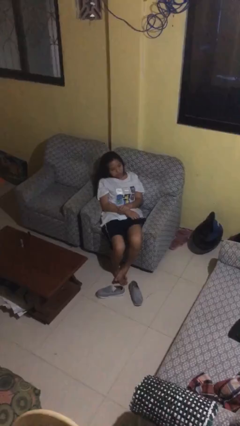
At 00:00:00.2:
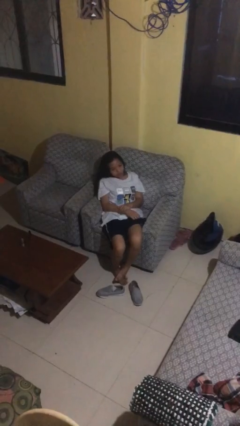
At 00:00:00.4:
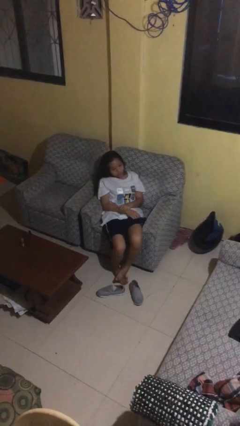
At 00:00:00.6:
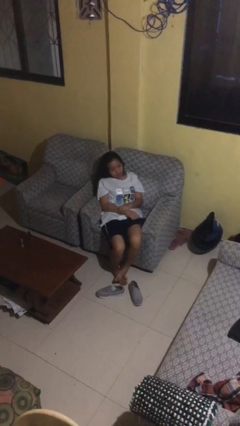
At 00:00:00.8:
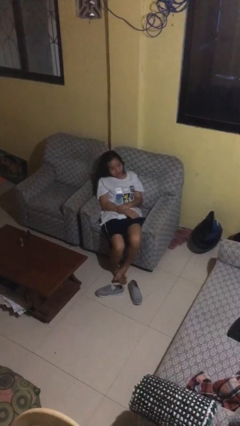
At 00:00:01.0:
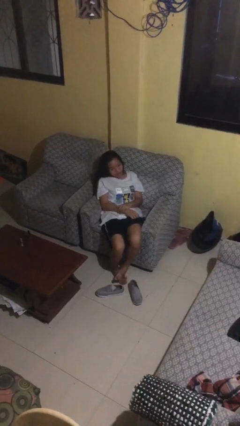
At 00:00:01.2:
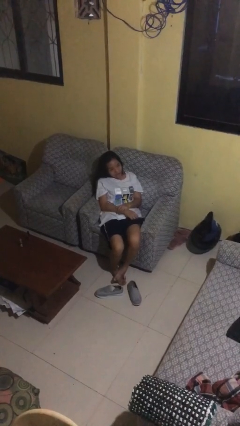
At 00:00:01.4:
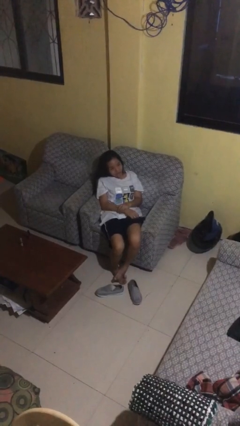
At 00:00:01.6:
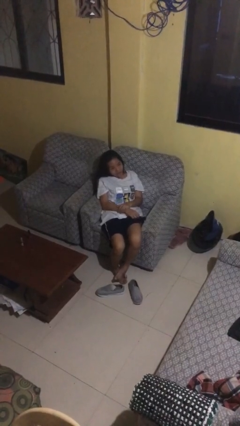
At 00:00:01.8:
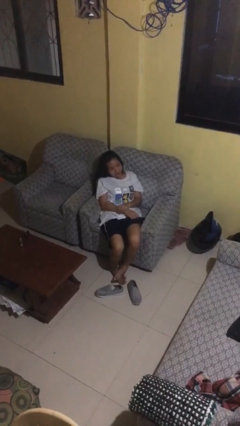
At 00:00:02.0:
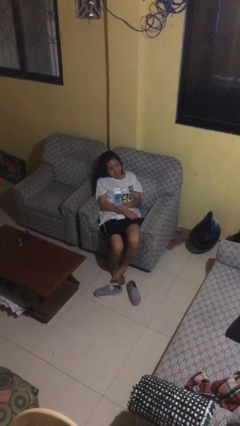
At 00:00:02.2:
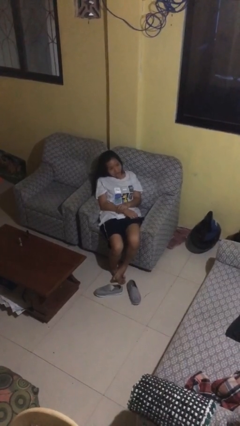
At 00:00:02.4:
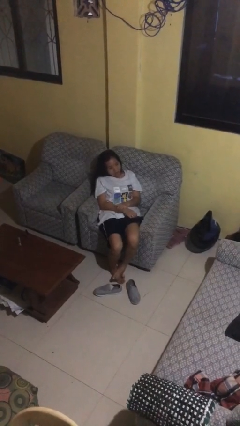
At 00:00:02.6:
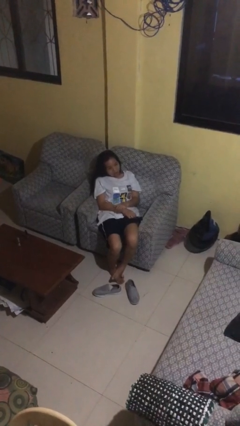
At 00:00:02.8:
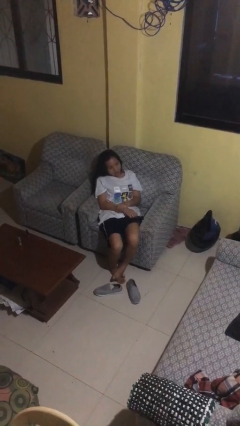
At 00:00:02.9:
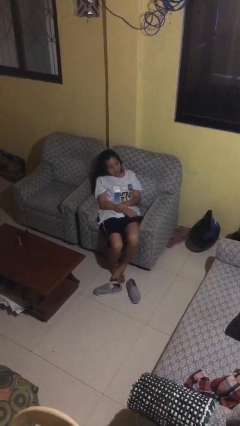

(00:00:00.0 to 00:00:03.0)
person sticks out tongue

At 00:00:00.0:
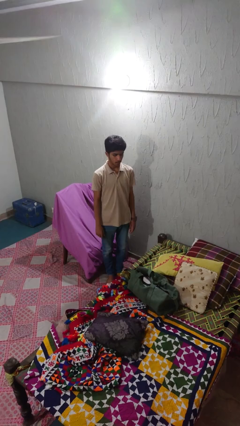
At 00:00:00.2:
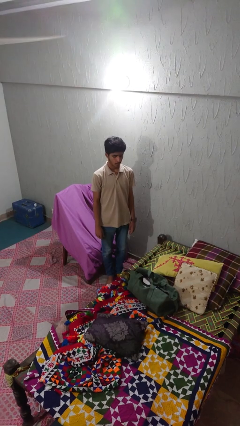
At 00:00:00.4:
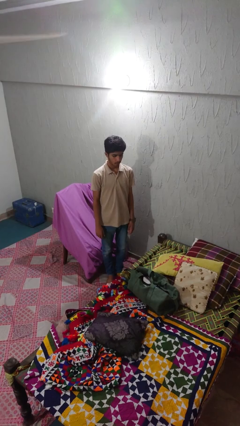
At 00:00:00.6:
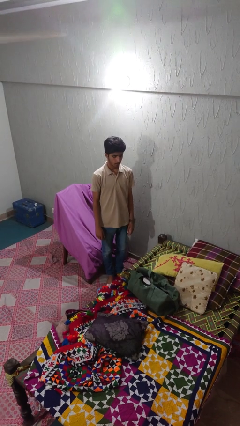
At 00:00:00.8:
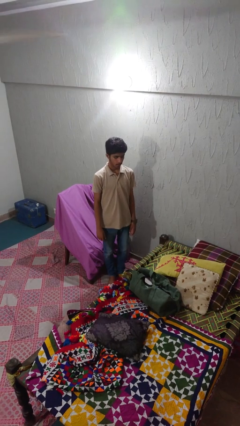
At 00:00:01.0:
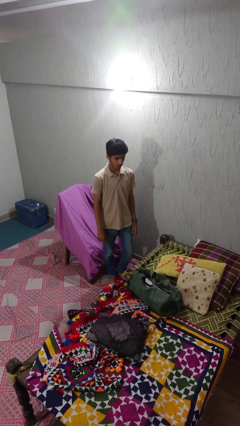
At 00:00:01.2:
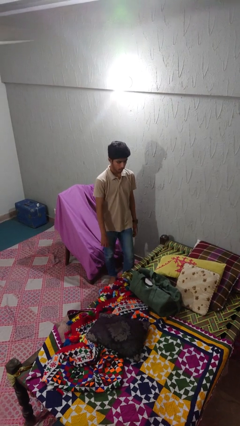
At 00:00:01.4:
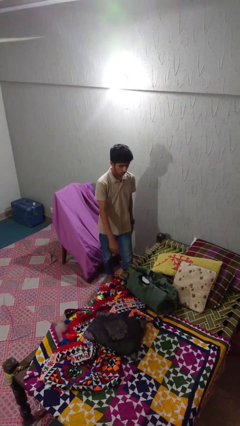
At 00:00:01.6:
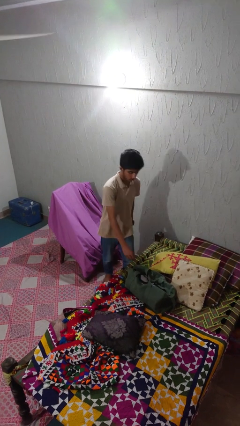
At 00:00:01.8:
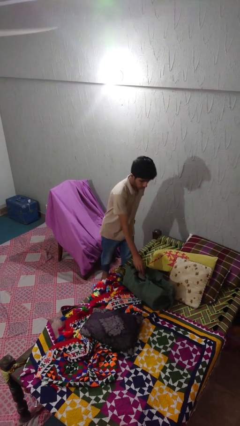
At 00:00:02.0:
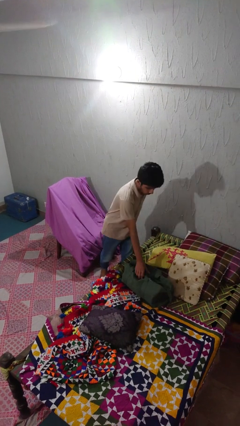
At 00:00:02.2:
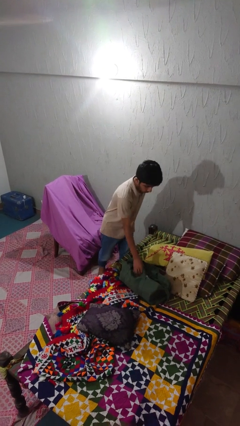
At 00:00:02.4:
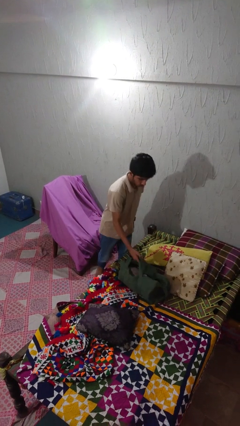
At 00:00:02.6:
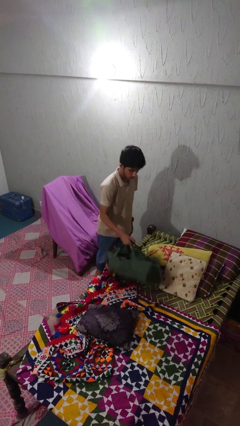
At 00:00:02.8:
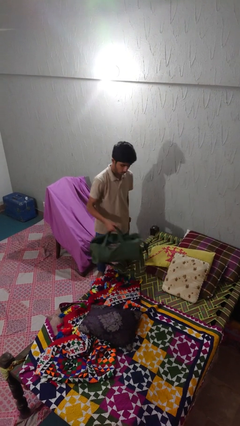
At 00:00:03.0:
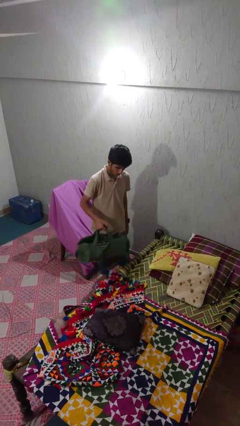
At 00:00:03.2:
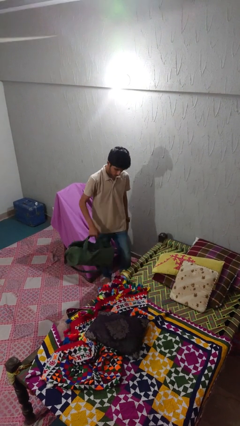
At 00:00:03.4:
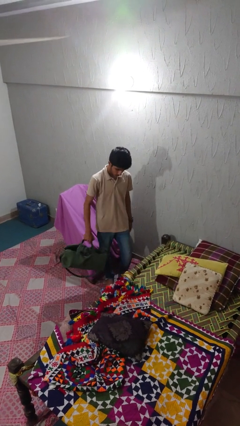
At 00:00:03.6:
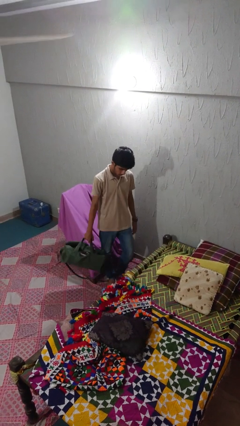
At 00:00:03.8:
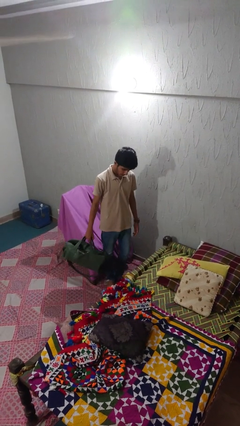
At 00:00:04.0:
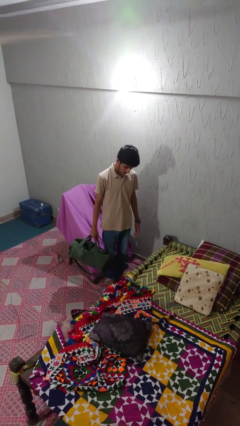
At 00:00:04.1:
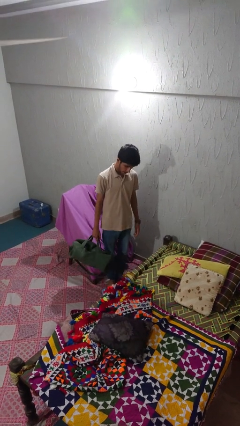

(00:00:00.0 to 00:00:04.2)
person picks up object from bed

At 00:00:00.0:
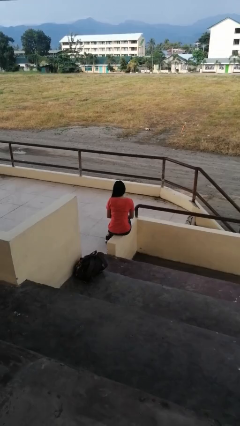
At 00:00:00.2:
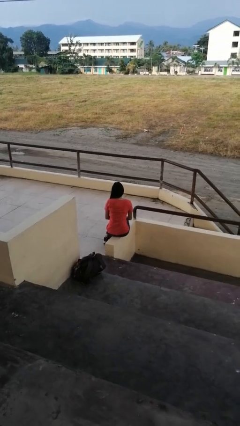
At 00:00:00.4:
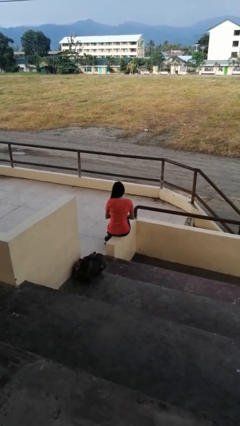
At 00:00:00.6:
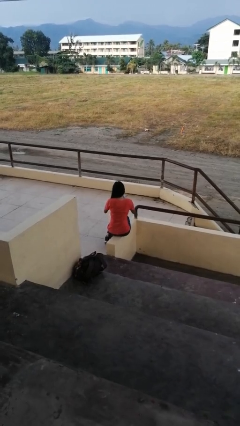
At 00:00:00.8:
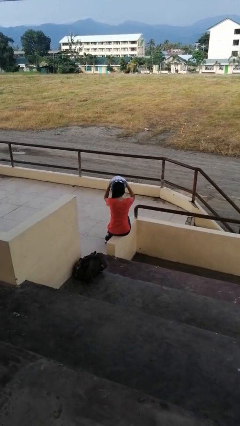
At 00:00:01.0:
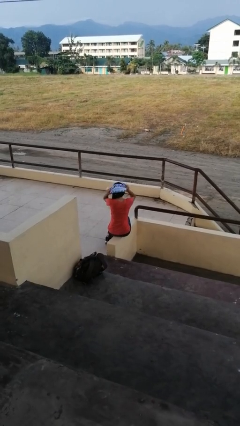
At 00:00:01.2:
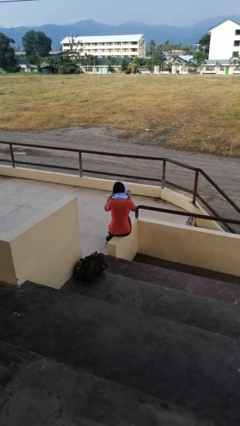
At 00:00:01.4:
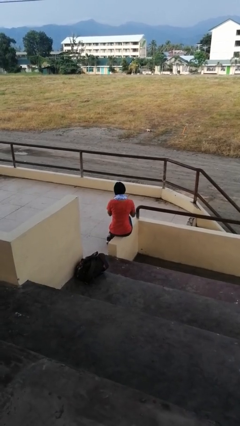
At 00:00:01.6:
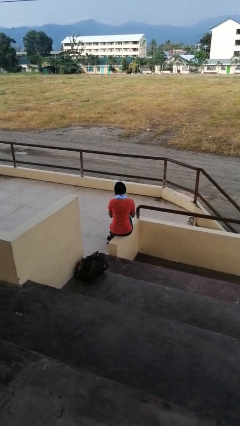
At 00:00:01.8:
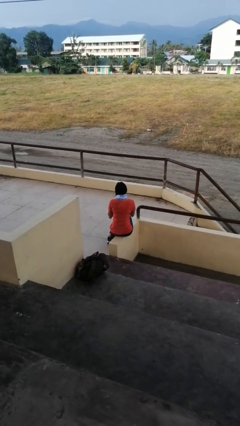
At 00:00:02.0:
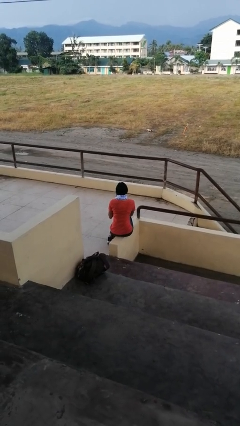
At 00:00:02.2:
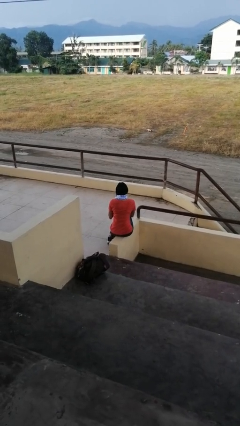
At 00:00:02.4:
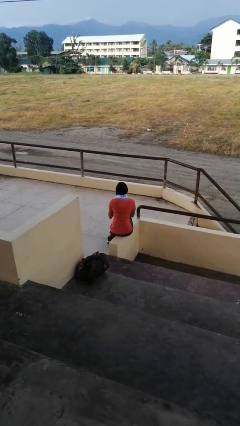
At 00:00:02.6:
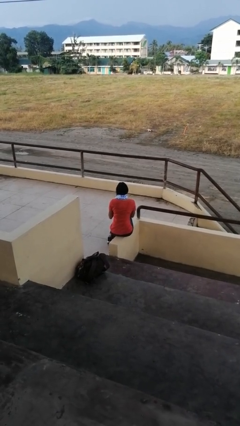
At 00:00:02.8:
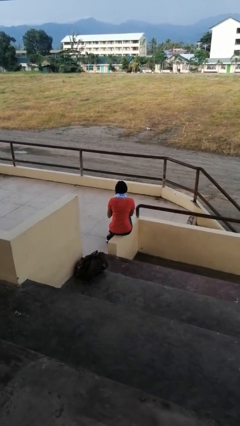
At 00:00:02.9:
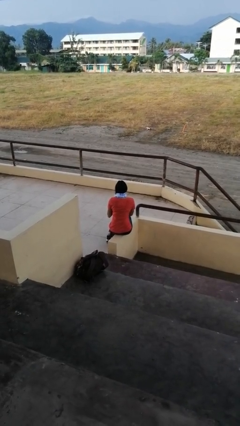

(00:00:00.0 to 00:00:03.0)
person puts on scarf

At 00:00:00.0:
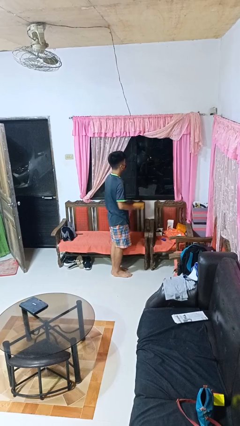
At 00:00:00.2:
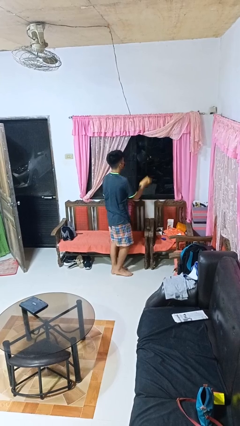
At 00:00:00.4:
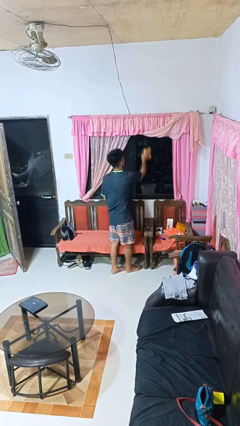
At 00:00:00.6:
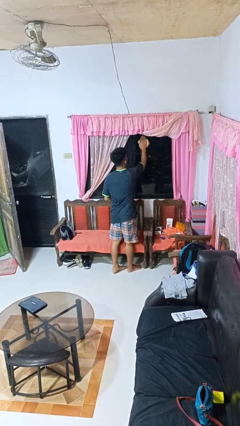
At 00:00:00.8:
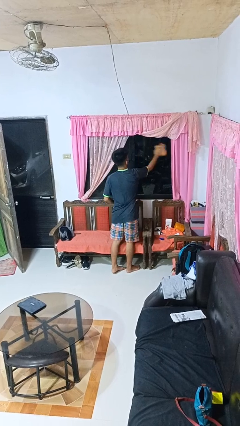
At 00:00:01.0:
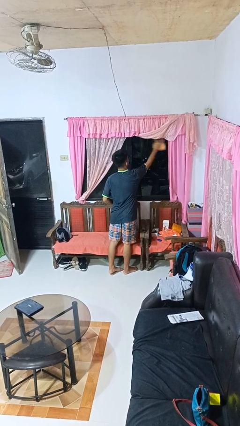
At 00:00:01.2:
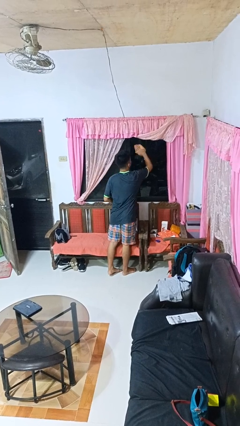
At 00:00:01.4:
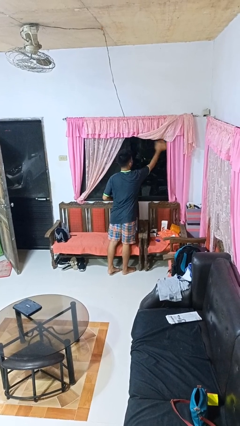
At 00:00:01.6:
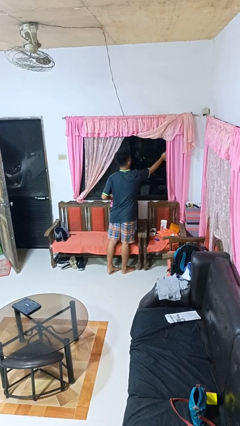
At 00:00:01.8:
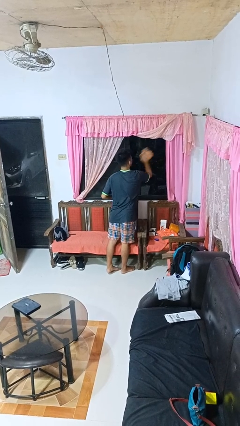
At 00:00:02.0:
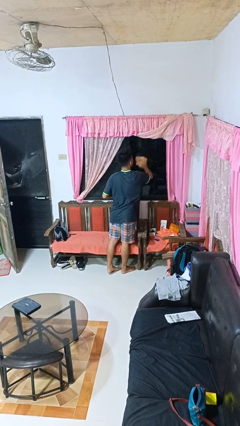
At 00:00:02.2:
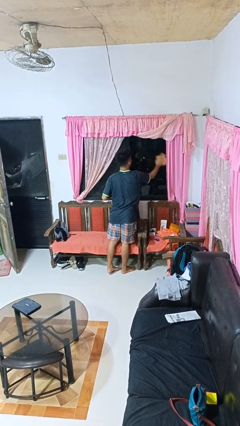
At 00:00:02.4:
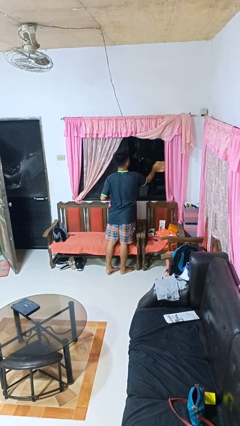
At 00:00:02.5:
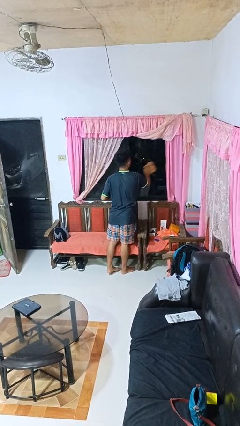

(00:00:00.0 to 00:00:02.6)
person washes window

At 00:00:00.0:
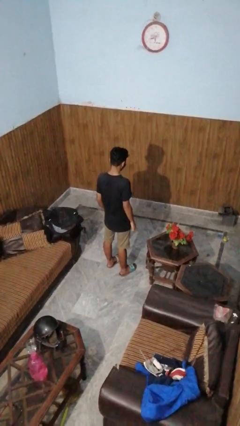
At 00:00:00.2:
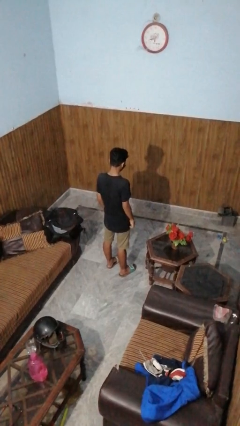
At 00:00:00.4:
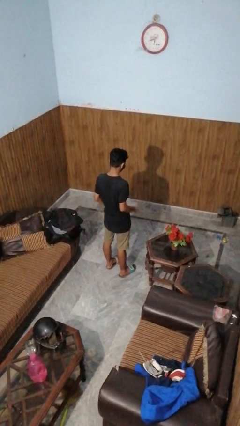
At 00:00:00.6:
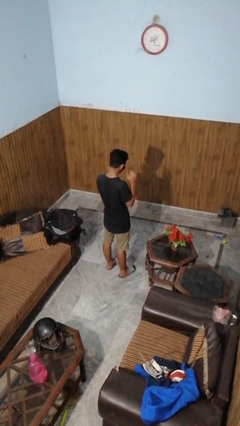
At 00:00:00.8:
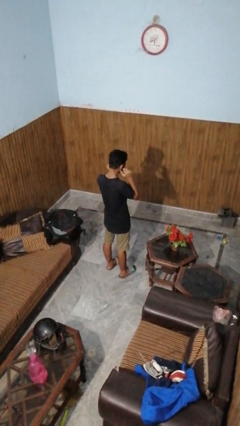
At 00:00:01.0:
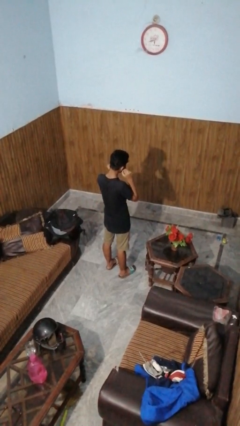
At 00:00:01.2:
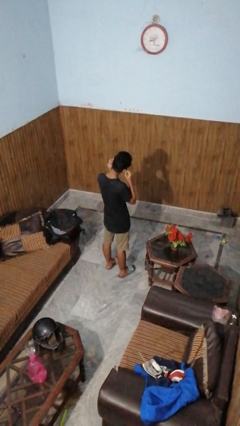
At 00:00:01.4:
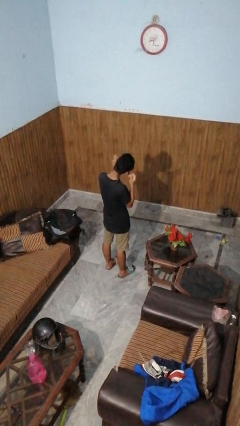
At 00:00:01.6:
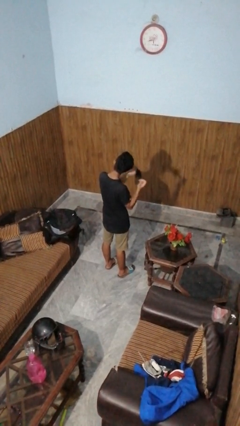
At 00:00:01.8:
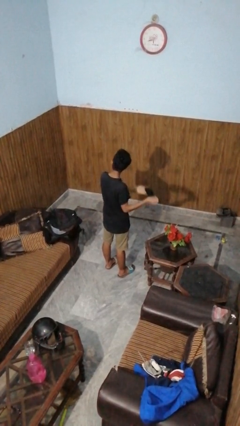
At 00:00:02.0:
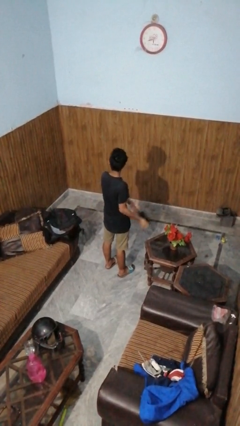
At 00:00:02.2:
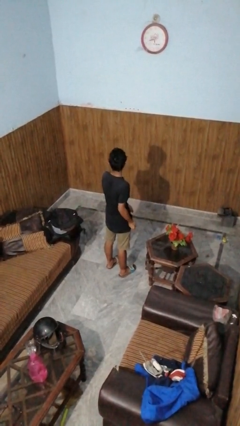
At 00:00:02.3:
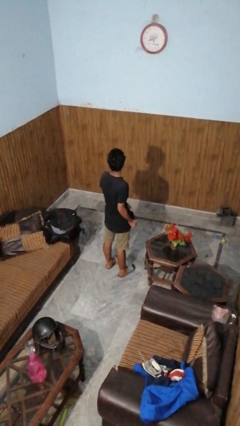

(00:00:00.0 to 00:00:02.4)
person takes off facemask

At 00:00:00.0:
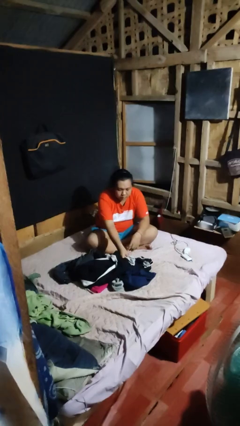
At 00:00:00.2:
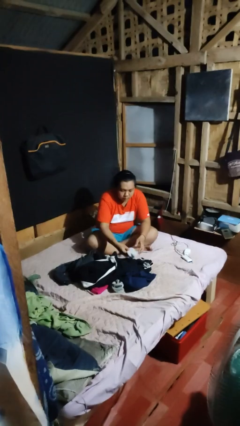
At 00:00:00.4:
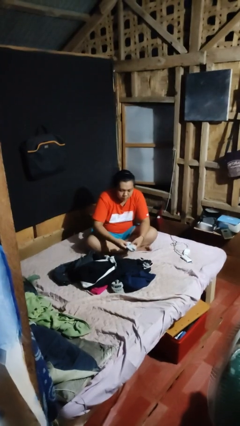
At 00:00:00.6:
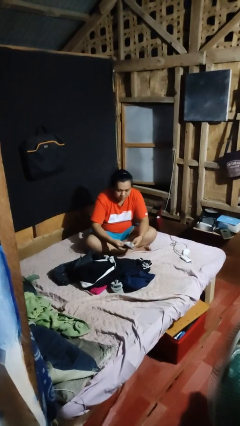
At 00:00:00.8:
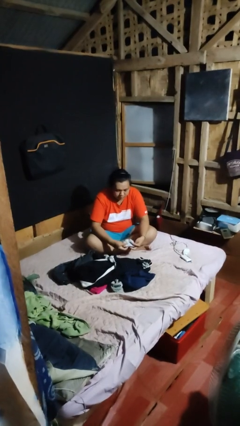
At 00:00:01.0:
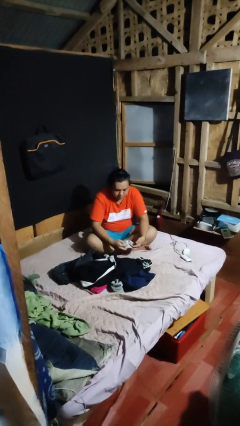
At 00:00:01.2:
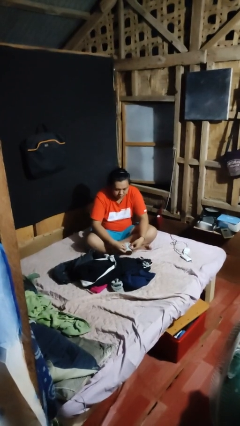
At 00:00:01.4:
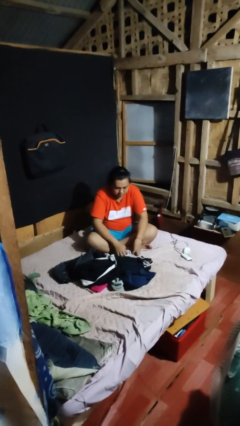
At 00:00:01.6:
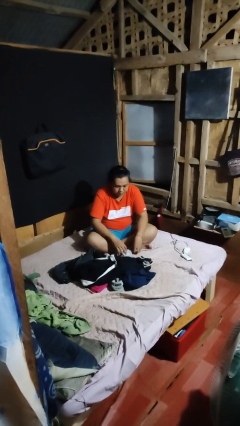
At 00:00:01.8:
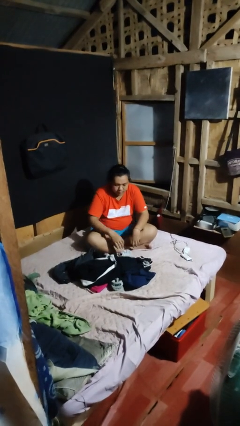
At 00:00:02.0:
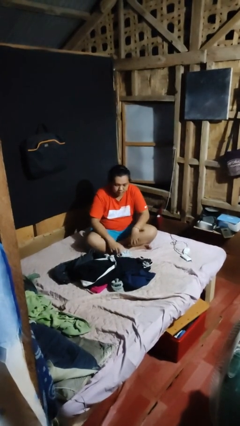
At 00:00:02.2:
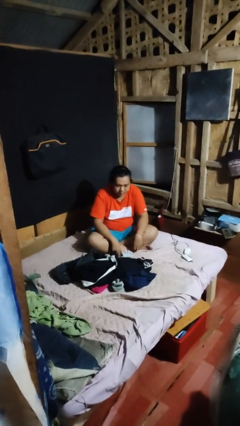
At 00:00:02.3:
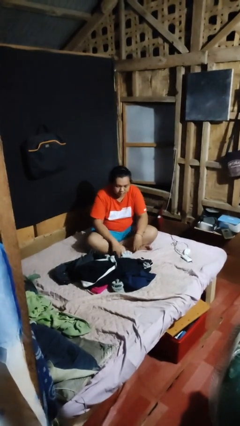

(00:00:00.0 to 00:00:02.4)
person folds socks
